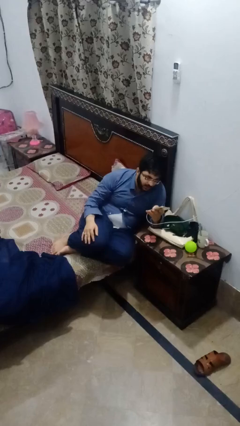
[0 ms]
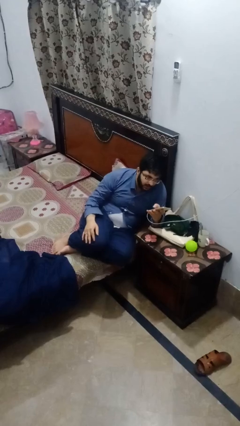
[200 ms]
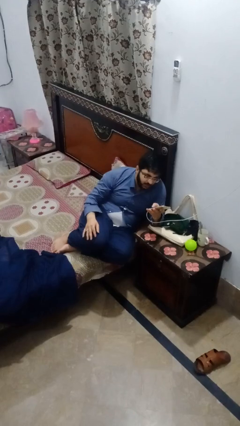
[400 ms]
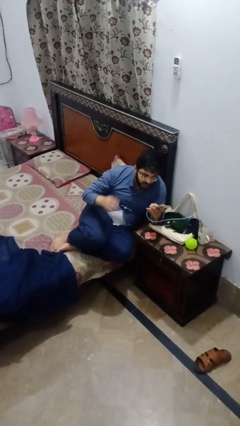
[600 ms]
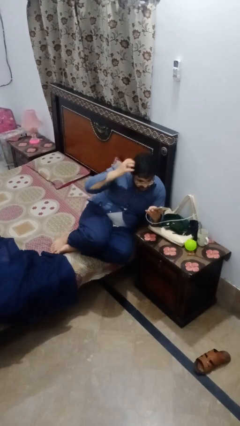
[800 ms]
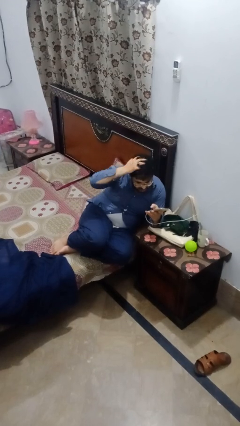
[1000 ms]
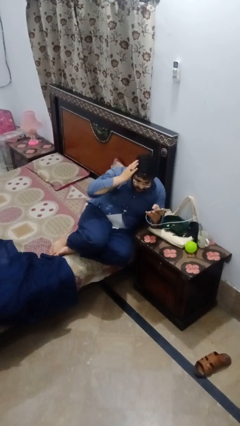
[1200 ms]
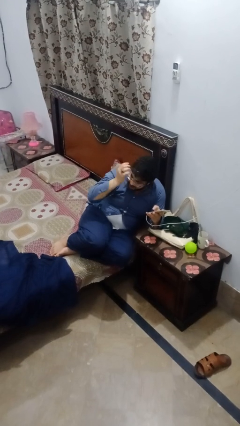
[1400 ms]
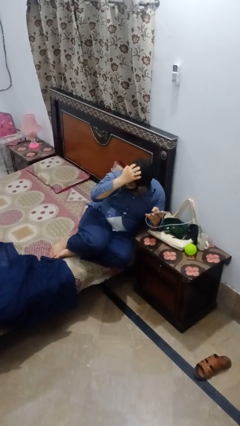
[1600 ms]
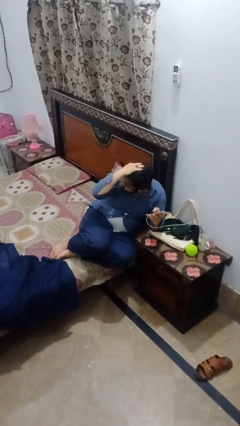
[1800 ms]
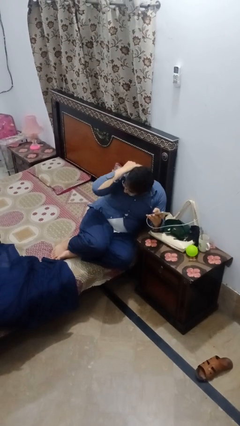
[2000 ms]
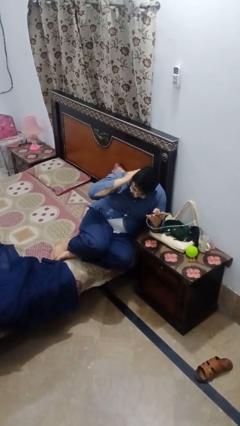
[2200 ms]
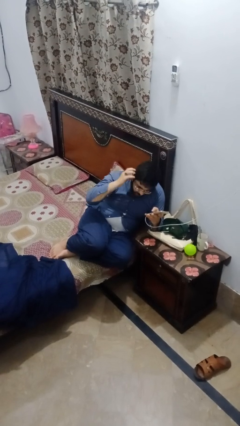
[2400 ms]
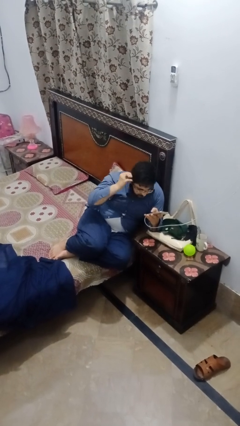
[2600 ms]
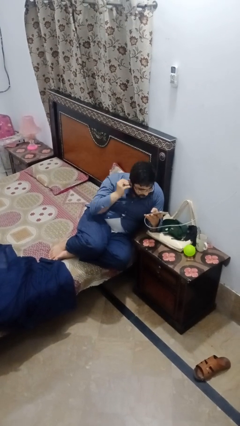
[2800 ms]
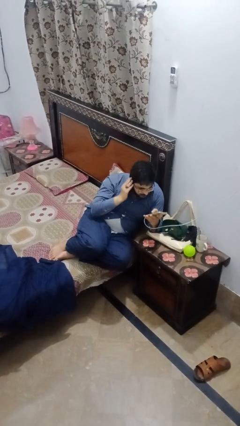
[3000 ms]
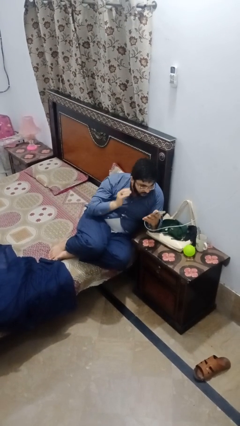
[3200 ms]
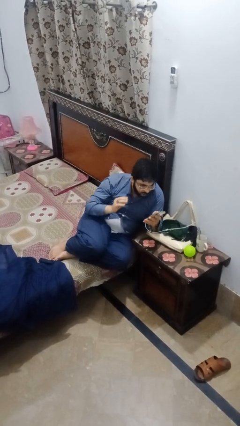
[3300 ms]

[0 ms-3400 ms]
person strokes hair

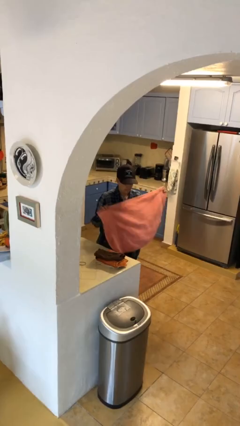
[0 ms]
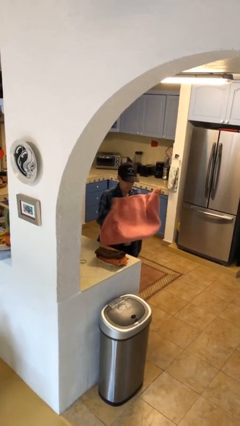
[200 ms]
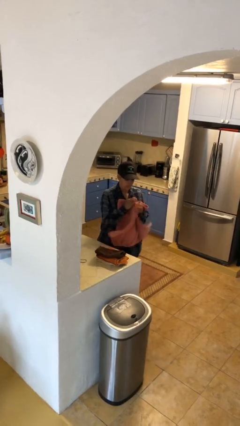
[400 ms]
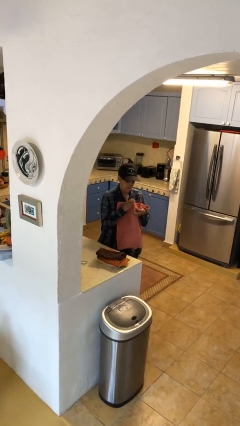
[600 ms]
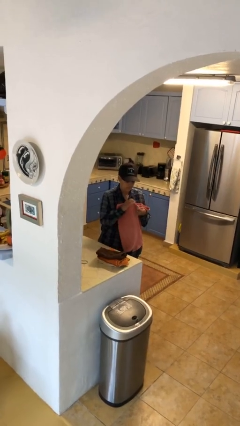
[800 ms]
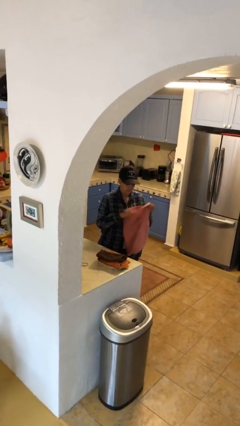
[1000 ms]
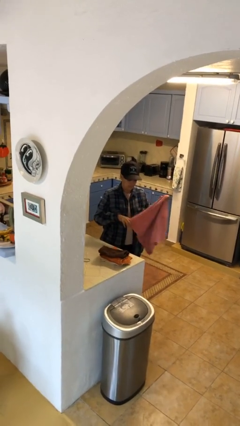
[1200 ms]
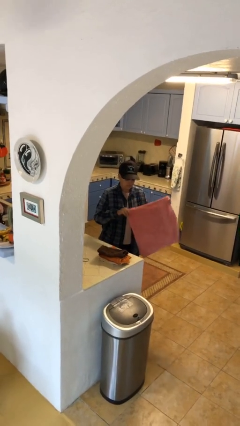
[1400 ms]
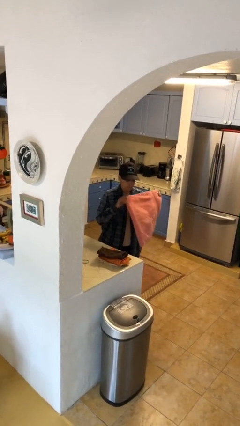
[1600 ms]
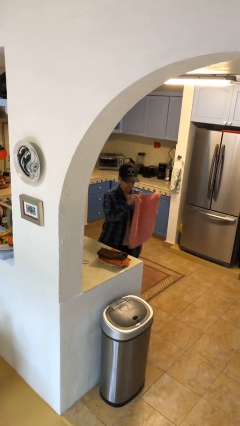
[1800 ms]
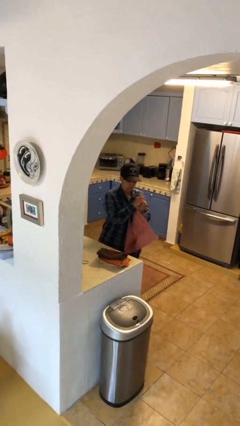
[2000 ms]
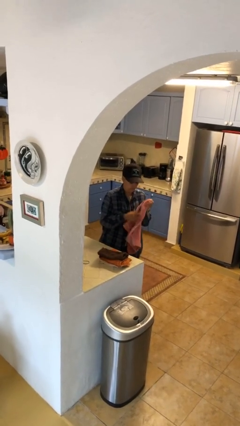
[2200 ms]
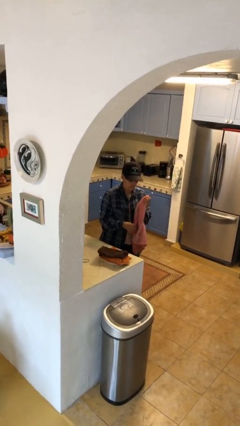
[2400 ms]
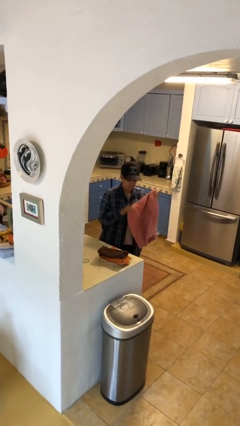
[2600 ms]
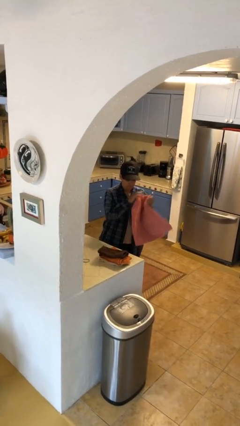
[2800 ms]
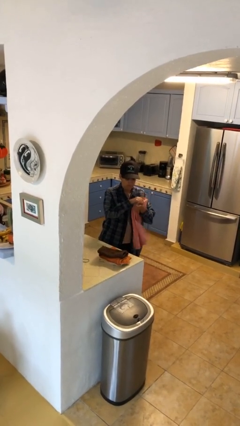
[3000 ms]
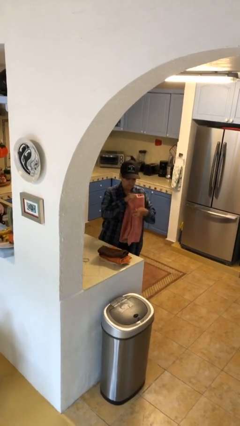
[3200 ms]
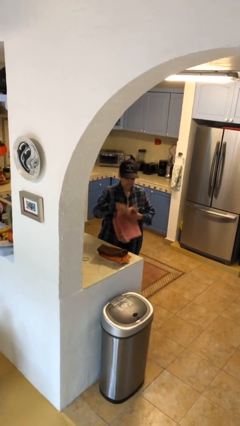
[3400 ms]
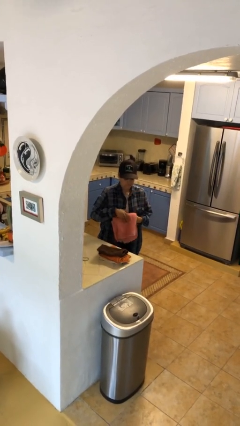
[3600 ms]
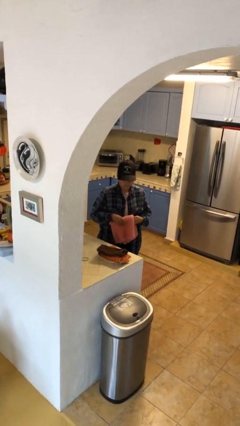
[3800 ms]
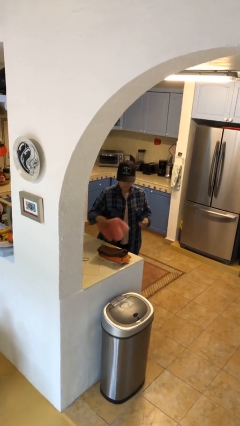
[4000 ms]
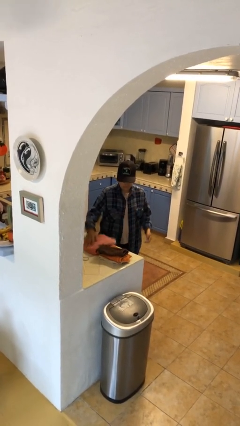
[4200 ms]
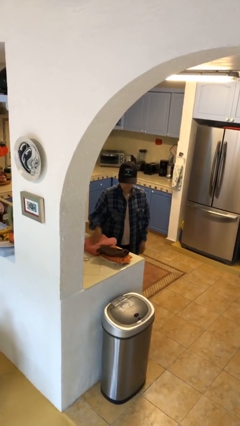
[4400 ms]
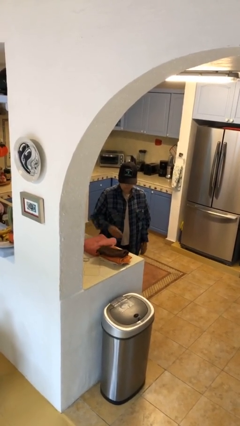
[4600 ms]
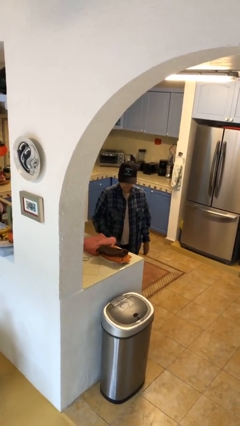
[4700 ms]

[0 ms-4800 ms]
person folds towel

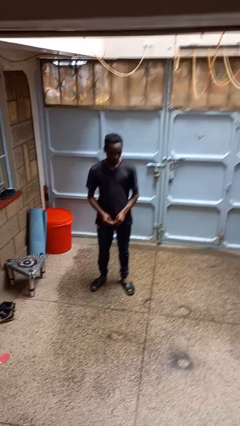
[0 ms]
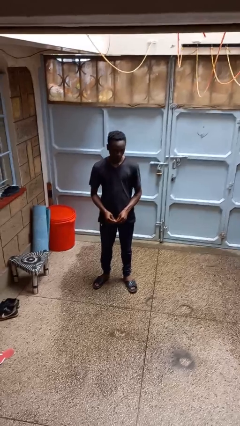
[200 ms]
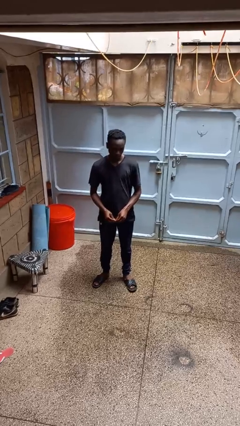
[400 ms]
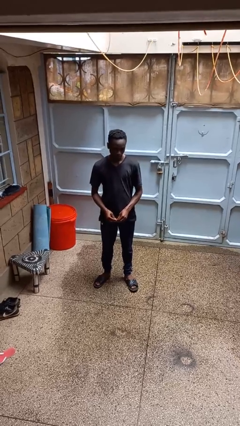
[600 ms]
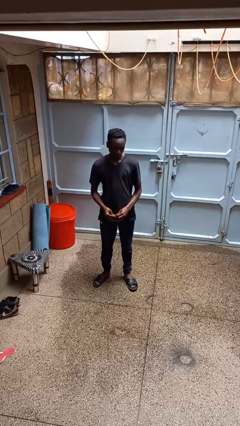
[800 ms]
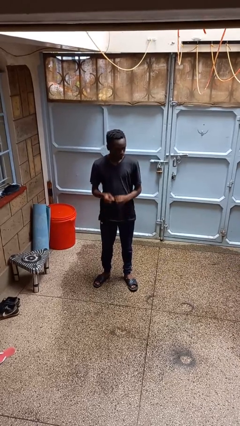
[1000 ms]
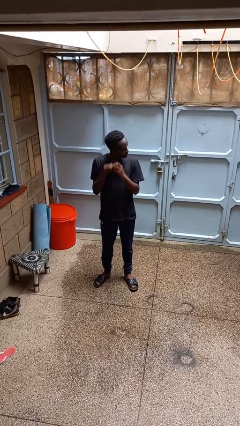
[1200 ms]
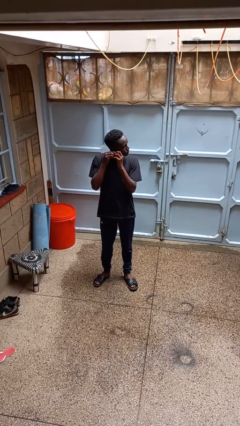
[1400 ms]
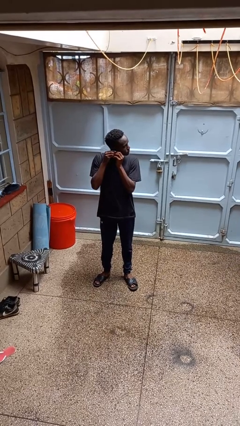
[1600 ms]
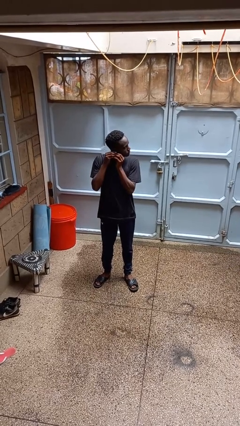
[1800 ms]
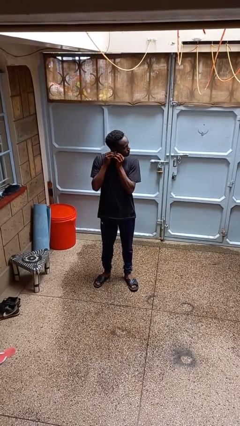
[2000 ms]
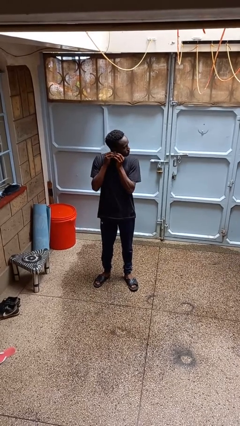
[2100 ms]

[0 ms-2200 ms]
person puts on earrings

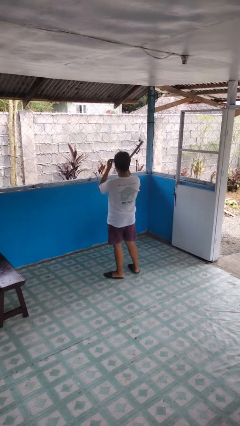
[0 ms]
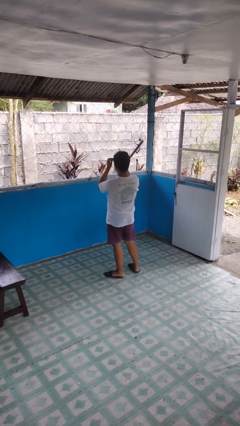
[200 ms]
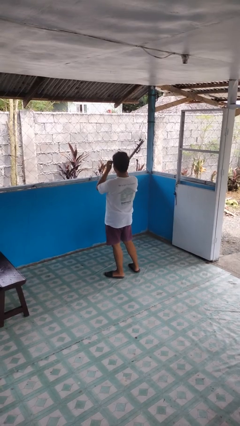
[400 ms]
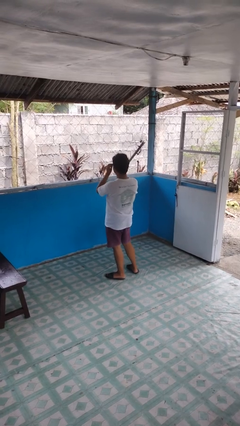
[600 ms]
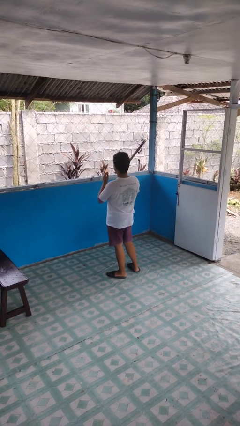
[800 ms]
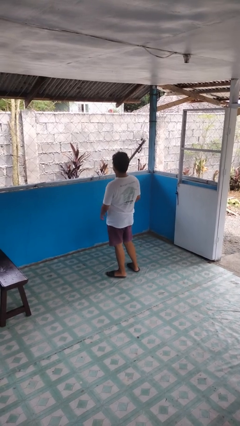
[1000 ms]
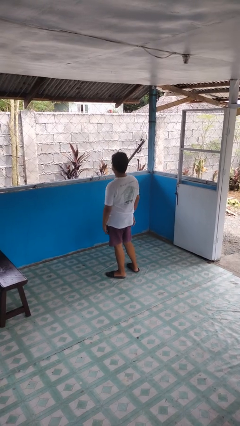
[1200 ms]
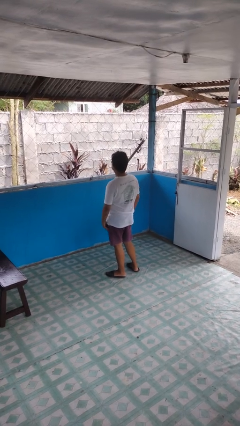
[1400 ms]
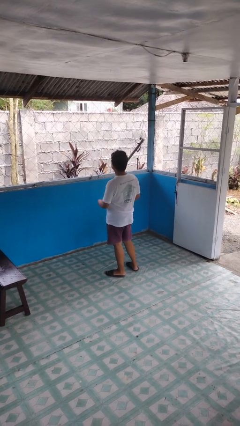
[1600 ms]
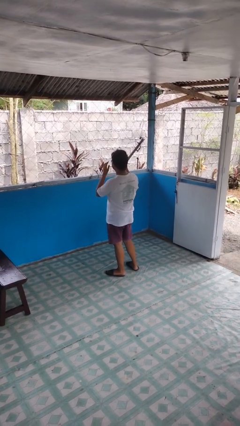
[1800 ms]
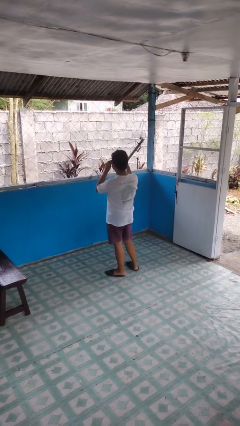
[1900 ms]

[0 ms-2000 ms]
person puts on sunglasses

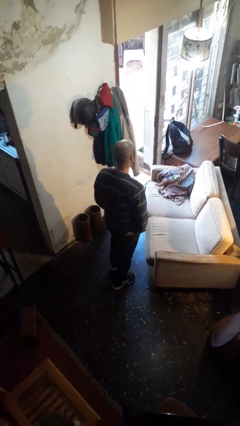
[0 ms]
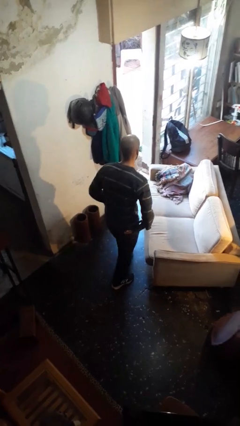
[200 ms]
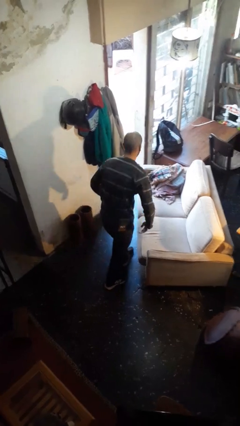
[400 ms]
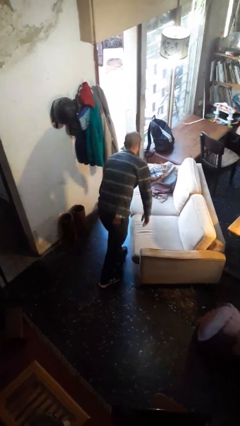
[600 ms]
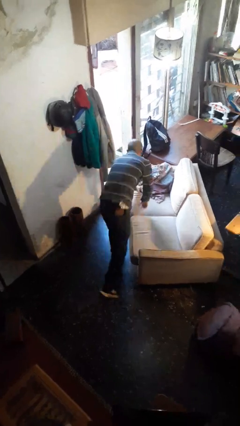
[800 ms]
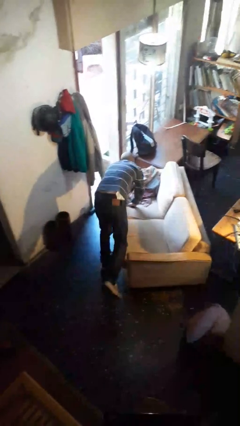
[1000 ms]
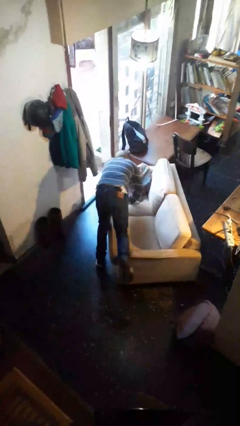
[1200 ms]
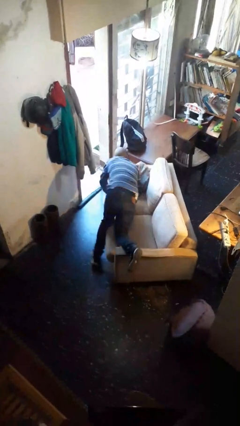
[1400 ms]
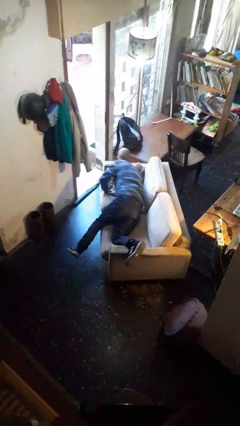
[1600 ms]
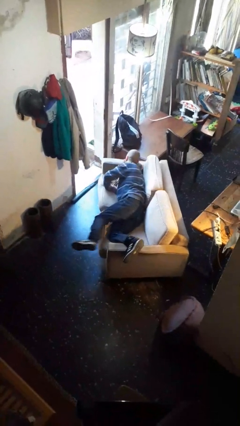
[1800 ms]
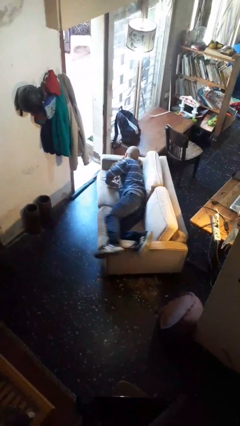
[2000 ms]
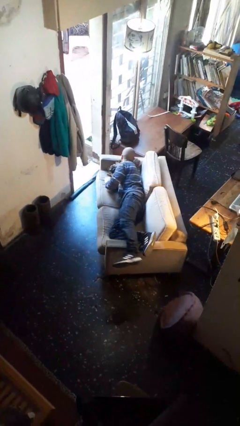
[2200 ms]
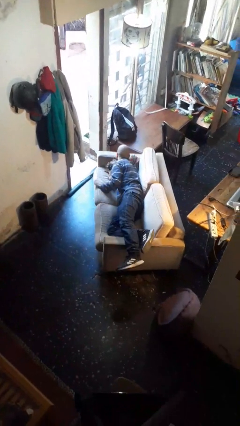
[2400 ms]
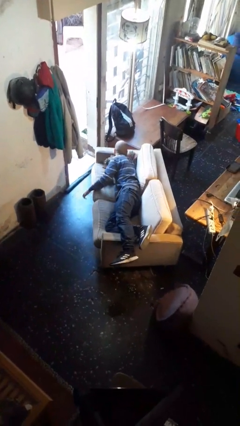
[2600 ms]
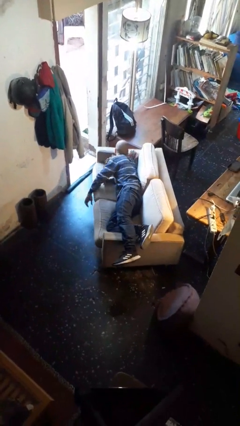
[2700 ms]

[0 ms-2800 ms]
person lies down on couch

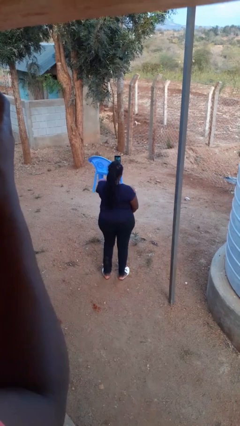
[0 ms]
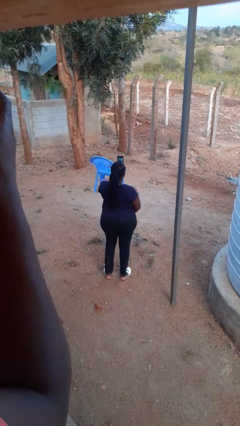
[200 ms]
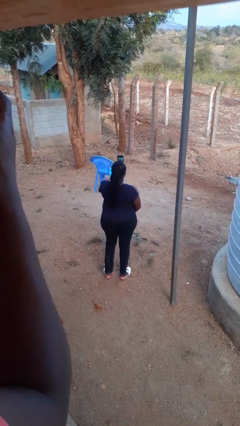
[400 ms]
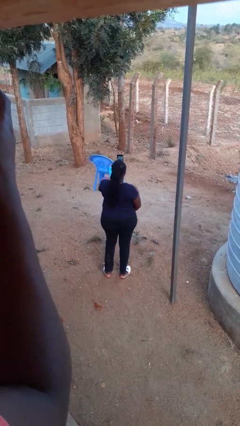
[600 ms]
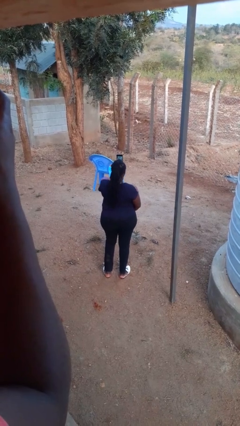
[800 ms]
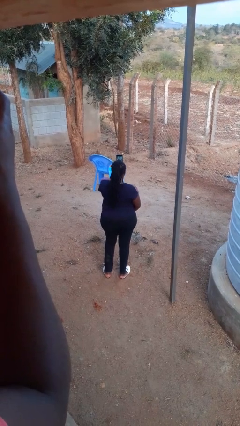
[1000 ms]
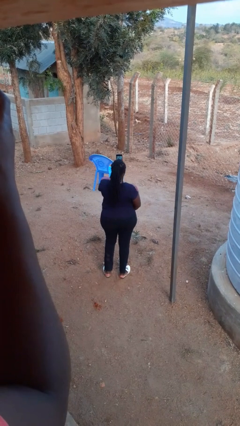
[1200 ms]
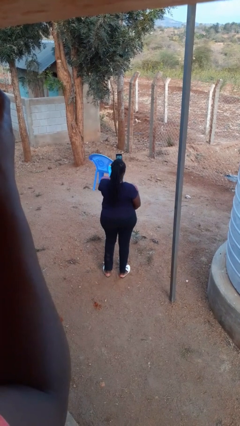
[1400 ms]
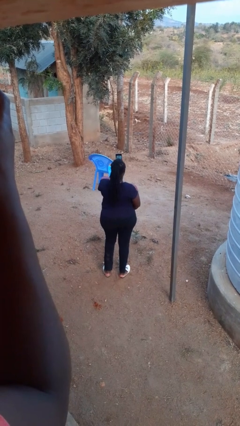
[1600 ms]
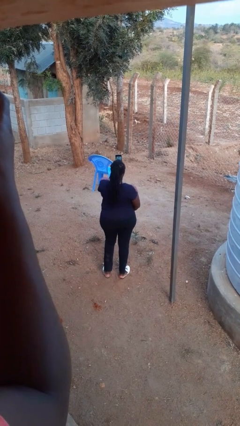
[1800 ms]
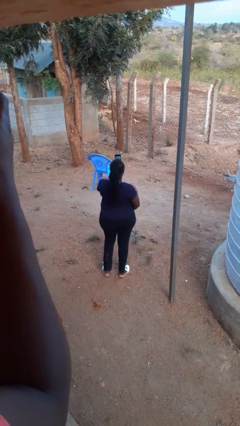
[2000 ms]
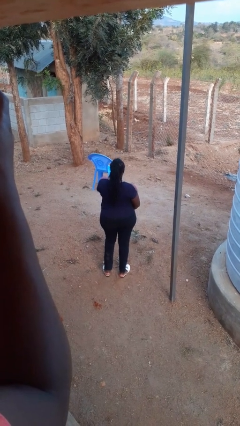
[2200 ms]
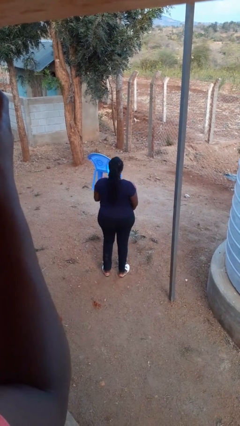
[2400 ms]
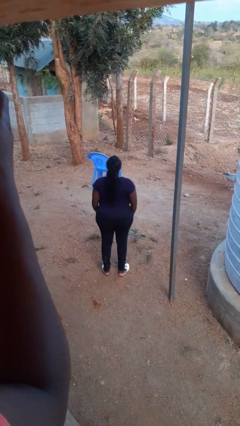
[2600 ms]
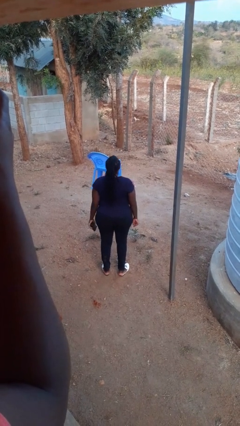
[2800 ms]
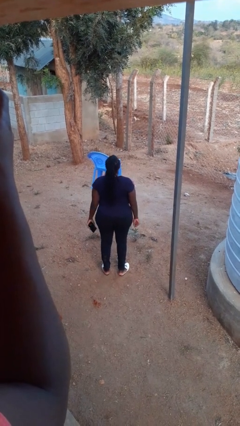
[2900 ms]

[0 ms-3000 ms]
person takes selfie
